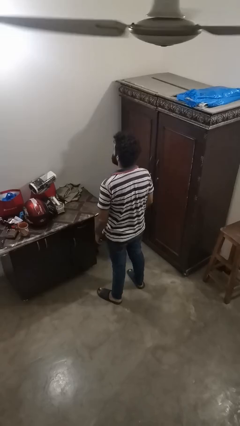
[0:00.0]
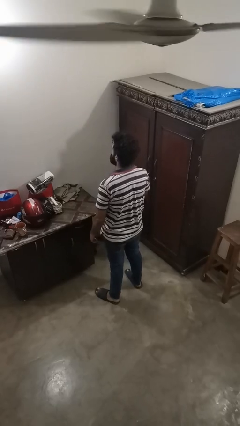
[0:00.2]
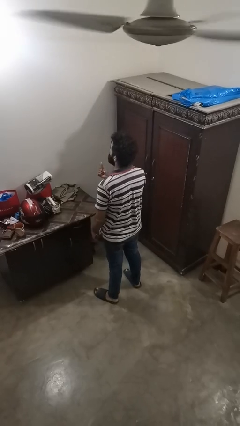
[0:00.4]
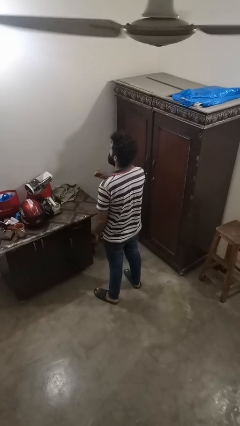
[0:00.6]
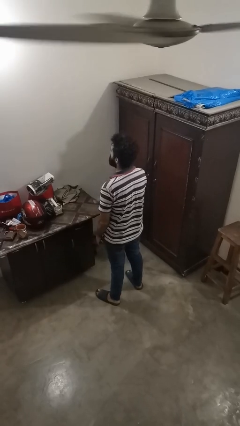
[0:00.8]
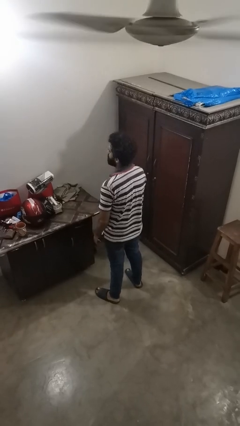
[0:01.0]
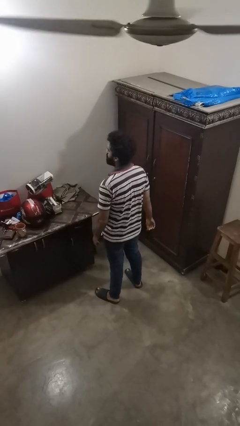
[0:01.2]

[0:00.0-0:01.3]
person snaps fingers

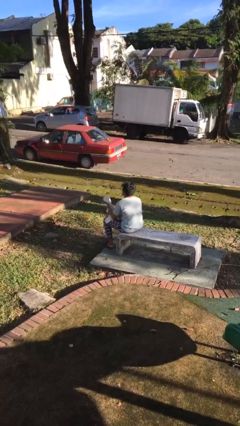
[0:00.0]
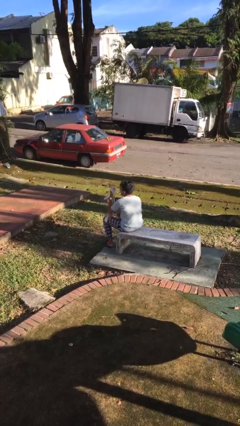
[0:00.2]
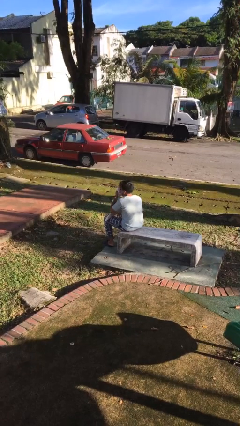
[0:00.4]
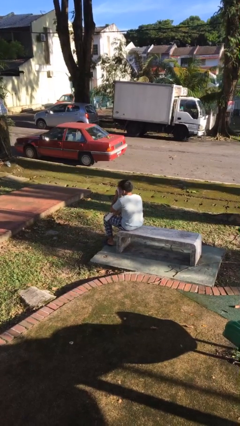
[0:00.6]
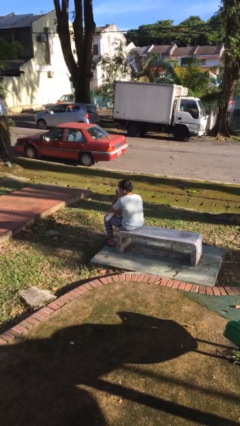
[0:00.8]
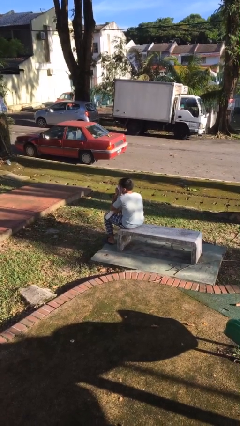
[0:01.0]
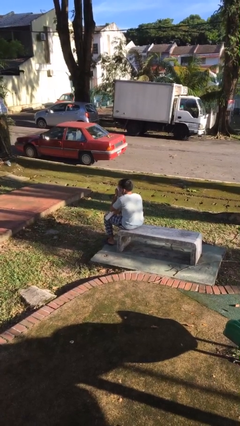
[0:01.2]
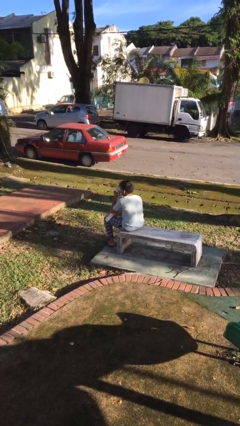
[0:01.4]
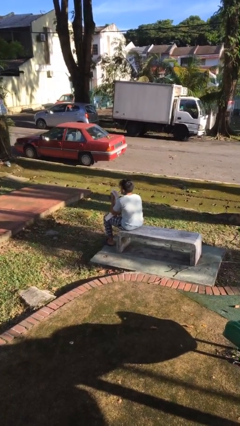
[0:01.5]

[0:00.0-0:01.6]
person blows nose

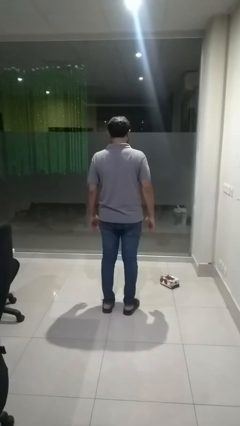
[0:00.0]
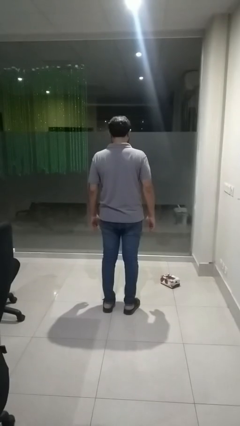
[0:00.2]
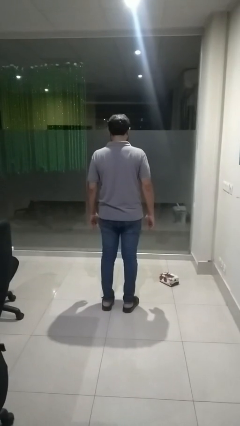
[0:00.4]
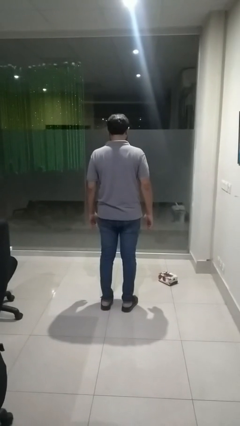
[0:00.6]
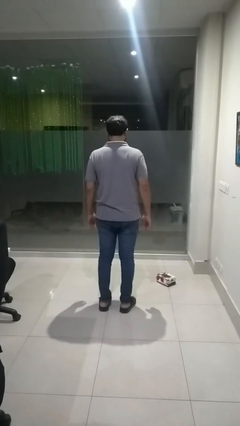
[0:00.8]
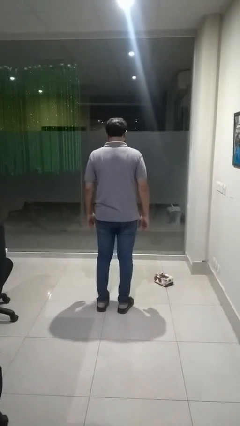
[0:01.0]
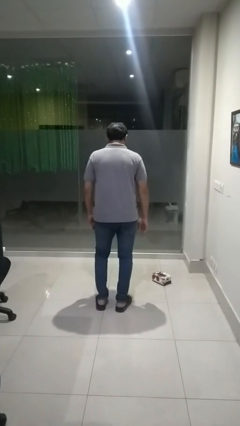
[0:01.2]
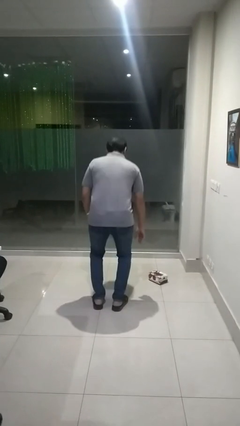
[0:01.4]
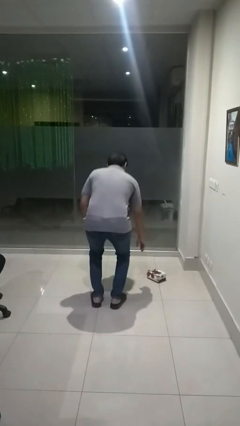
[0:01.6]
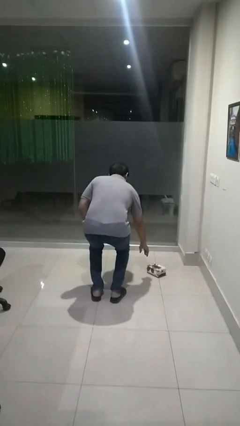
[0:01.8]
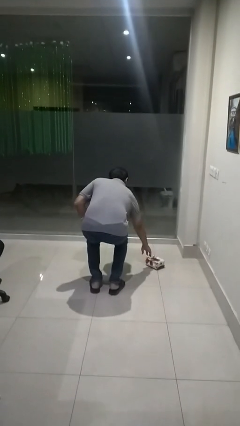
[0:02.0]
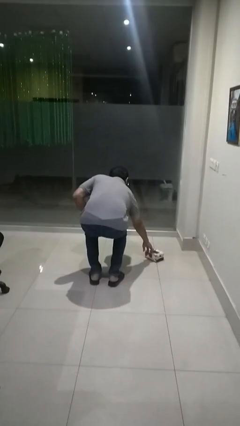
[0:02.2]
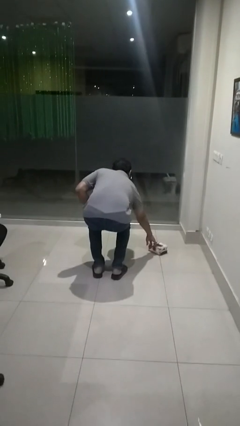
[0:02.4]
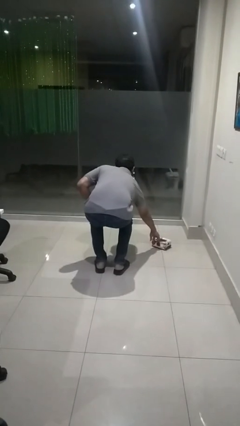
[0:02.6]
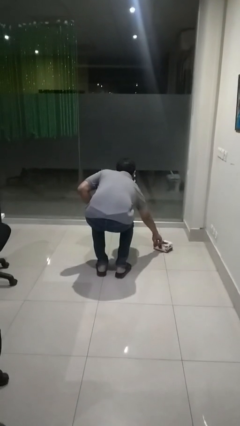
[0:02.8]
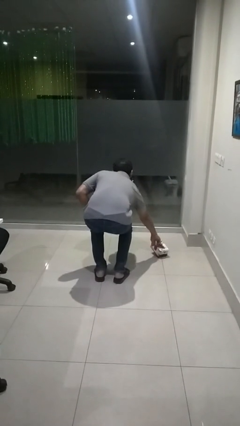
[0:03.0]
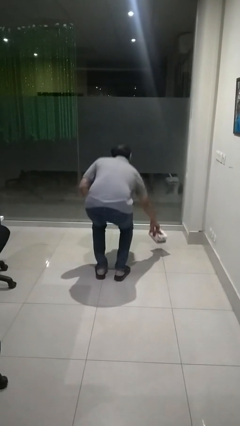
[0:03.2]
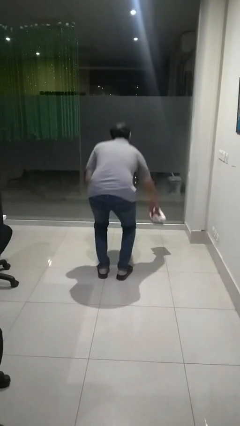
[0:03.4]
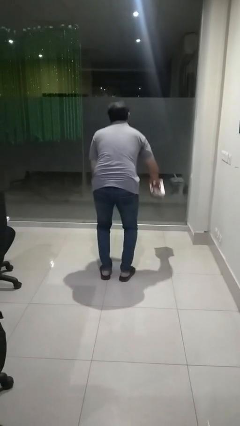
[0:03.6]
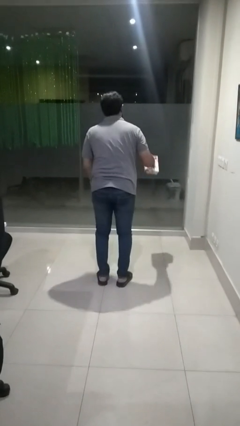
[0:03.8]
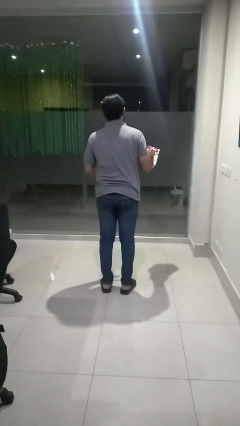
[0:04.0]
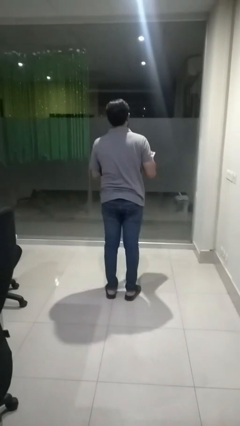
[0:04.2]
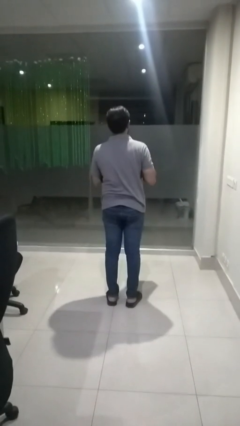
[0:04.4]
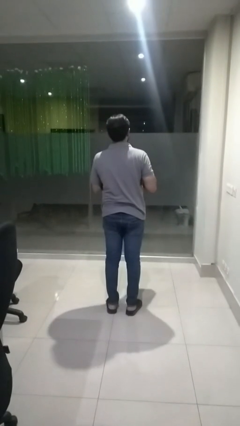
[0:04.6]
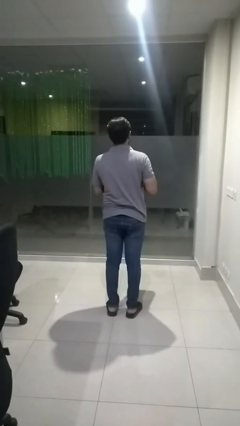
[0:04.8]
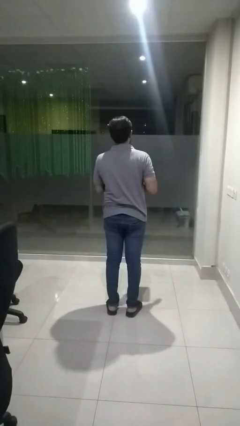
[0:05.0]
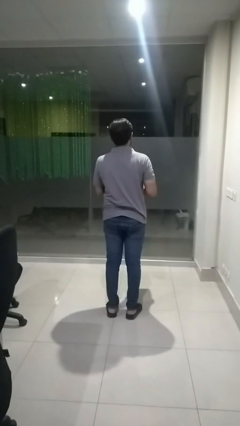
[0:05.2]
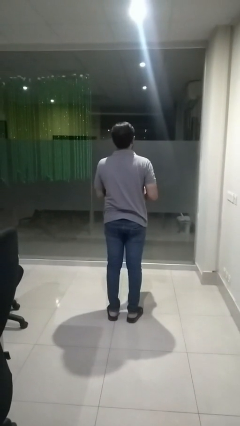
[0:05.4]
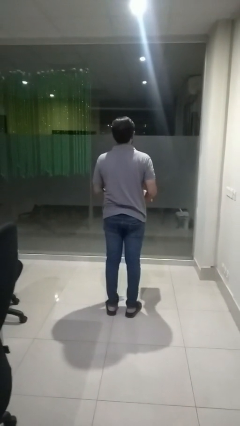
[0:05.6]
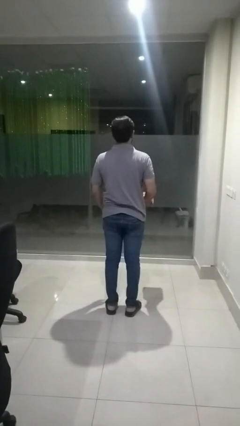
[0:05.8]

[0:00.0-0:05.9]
person picks up object from floor

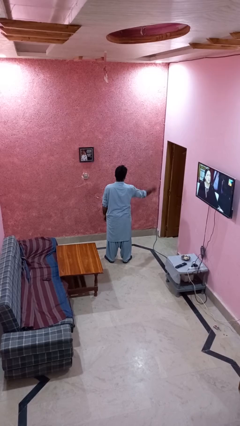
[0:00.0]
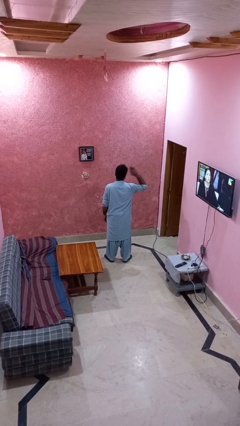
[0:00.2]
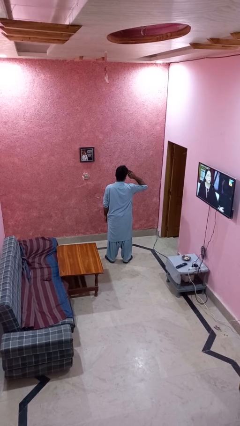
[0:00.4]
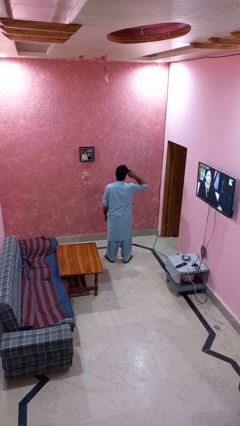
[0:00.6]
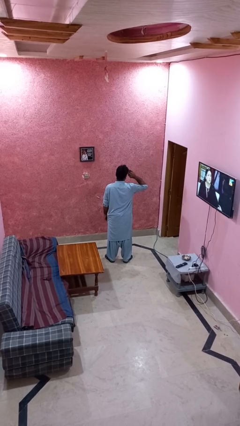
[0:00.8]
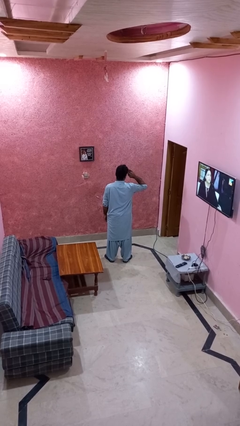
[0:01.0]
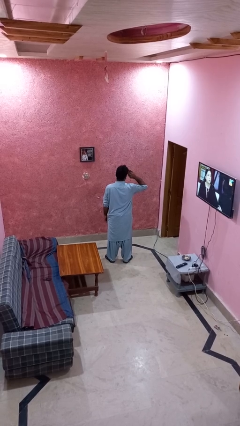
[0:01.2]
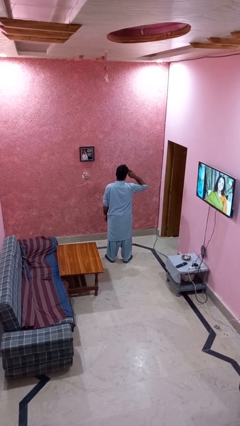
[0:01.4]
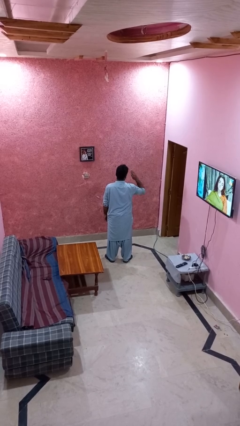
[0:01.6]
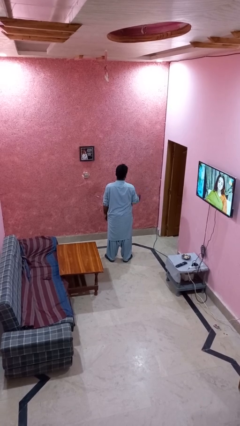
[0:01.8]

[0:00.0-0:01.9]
person salutes

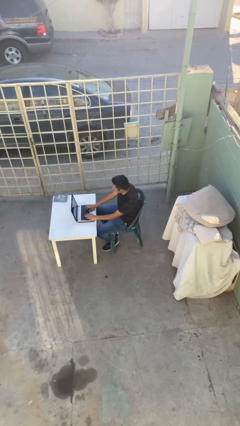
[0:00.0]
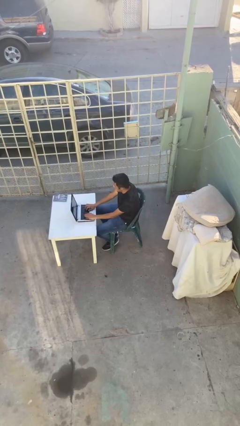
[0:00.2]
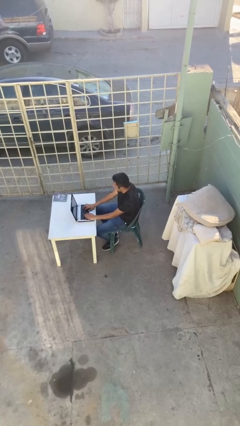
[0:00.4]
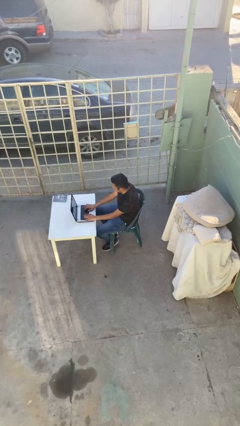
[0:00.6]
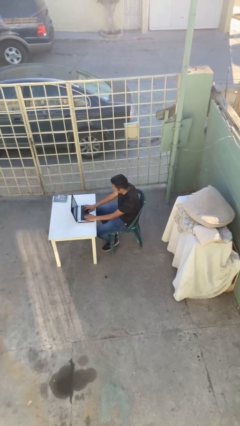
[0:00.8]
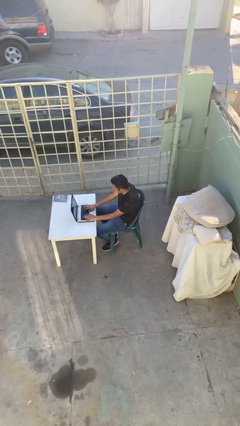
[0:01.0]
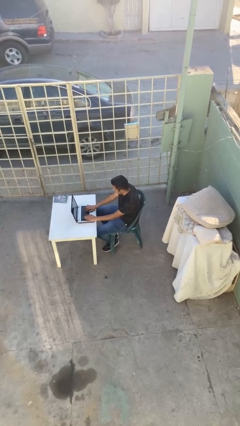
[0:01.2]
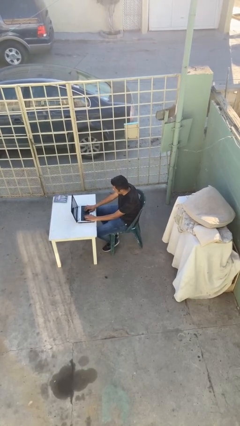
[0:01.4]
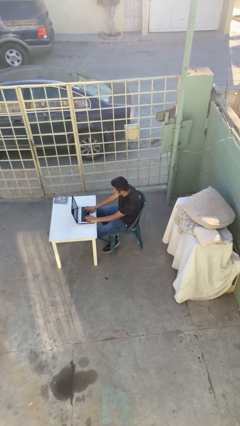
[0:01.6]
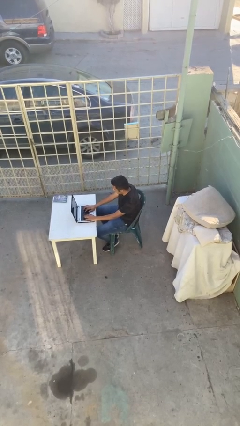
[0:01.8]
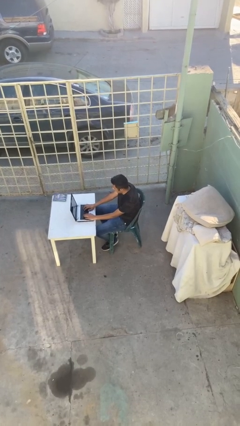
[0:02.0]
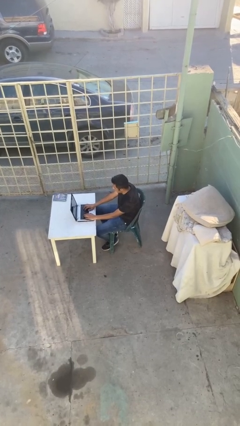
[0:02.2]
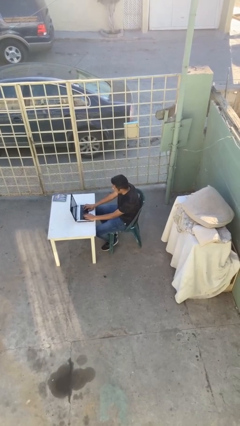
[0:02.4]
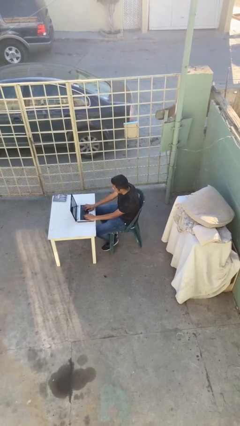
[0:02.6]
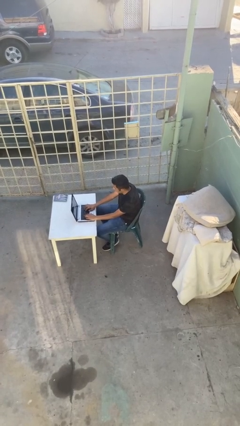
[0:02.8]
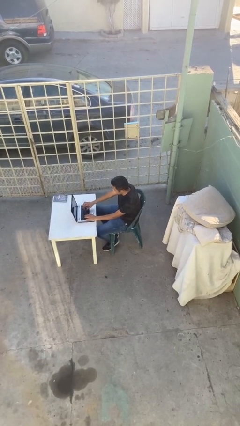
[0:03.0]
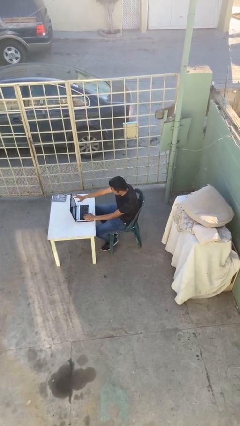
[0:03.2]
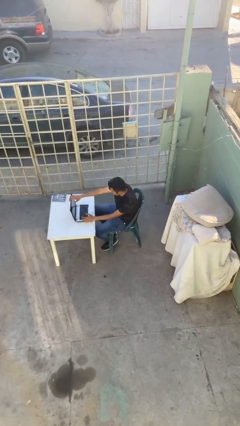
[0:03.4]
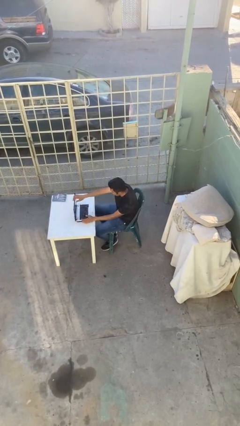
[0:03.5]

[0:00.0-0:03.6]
person interacts with laptop

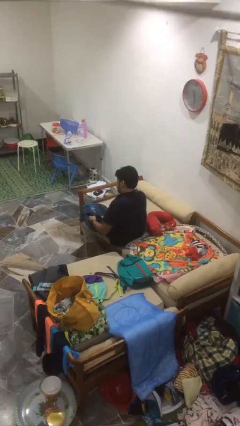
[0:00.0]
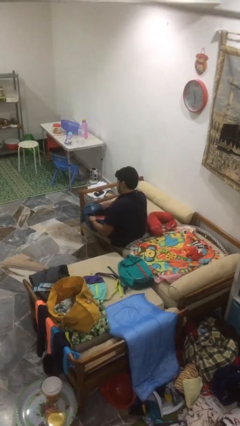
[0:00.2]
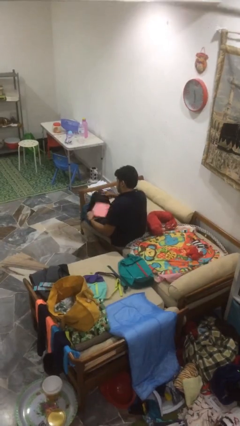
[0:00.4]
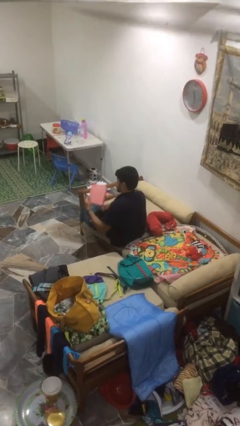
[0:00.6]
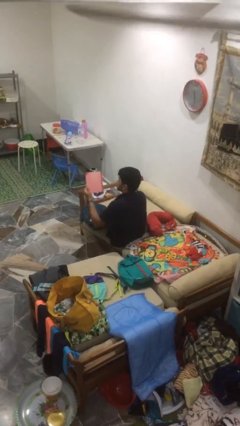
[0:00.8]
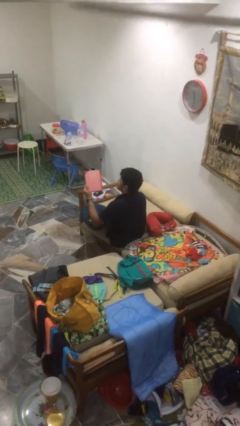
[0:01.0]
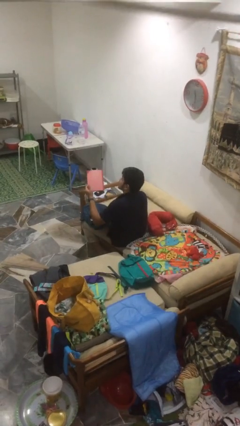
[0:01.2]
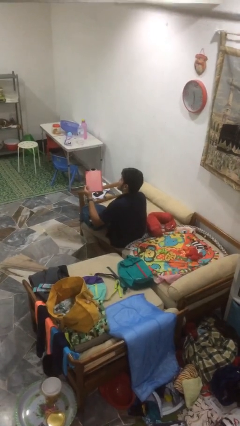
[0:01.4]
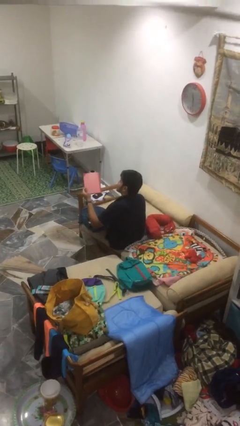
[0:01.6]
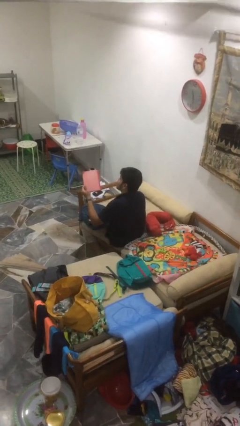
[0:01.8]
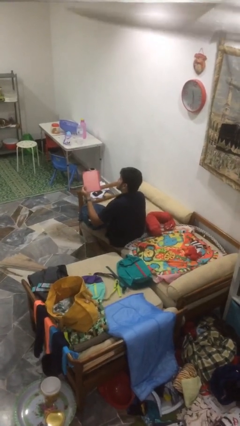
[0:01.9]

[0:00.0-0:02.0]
person takes object from bag

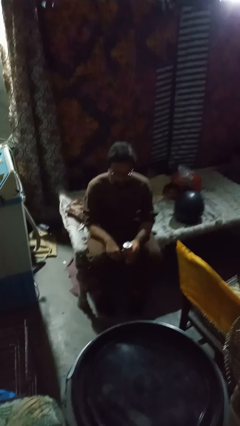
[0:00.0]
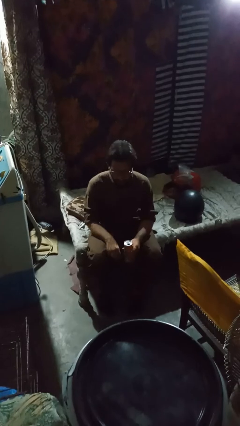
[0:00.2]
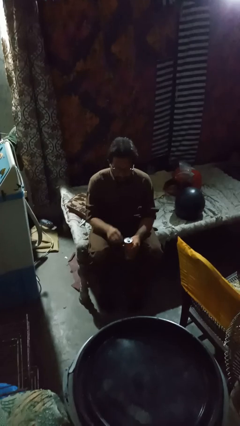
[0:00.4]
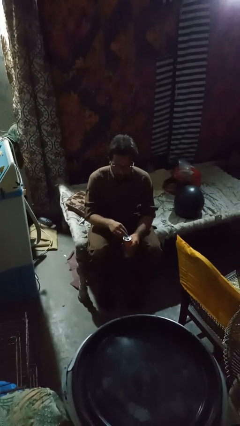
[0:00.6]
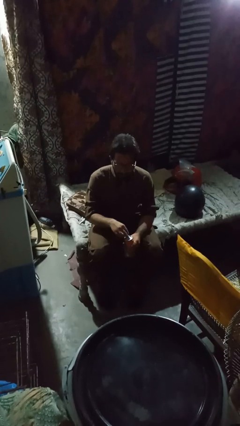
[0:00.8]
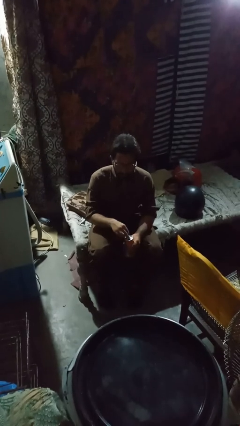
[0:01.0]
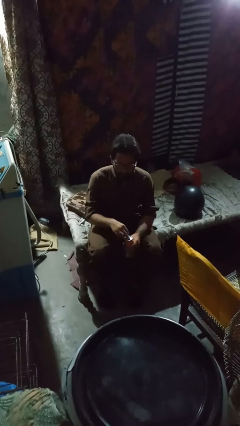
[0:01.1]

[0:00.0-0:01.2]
person opens can with can opener
